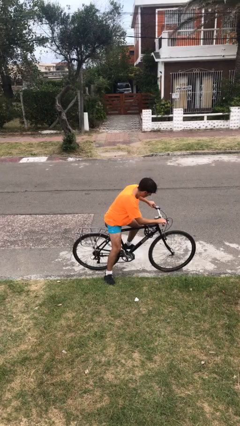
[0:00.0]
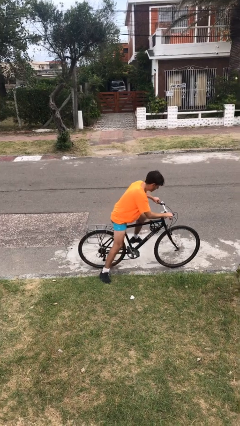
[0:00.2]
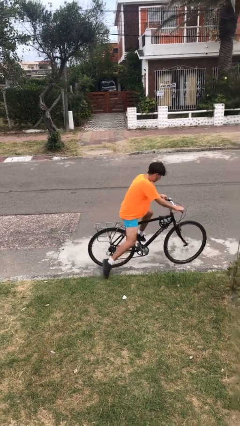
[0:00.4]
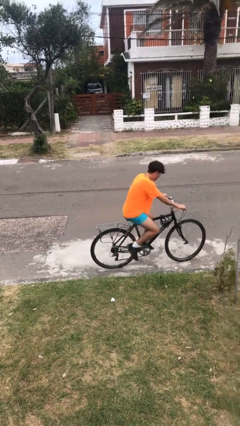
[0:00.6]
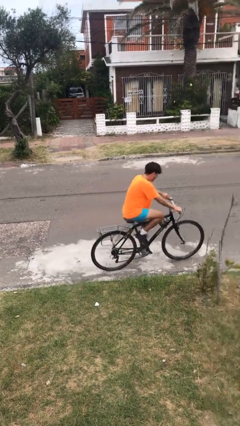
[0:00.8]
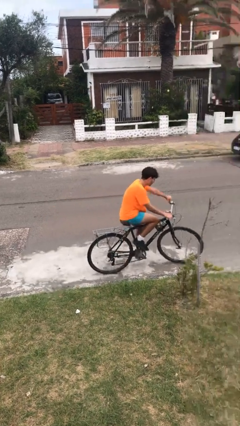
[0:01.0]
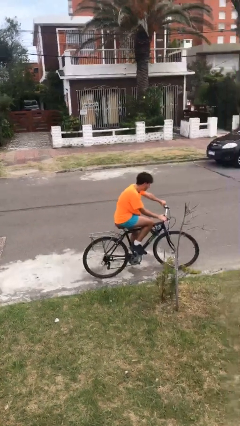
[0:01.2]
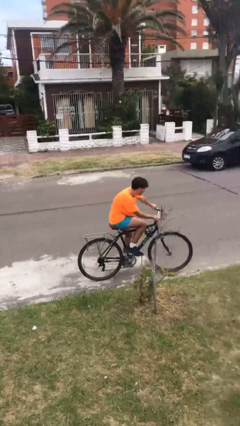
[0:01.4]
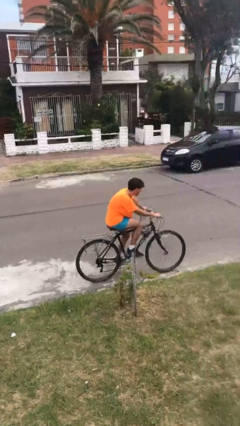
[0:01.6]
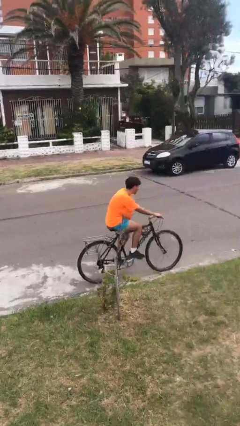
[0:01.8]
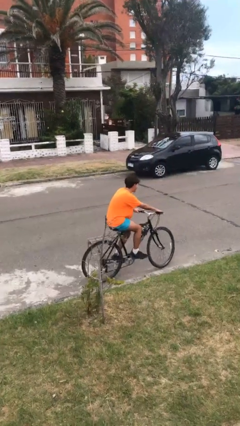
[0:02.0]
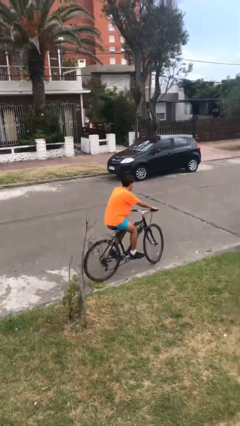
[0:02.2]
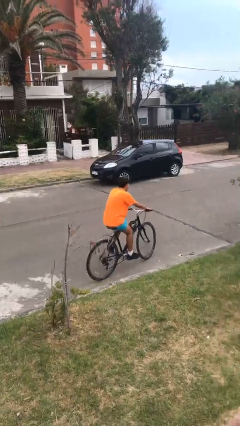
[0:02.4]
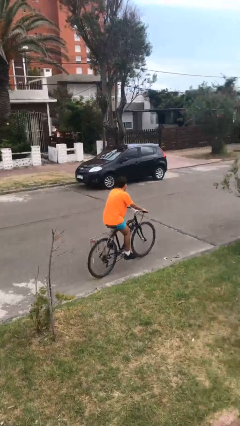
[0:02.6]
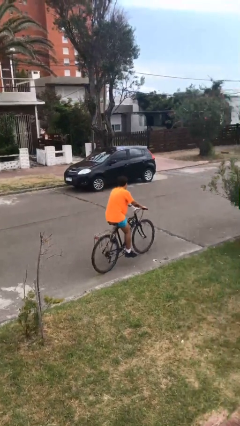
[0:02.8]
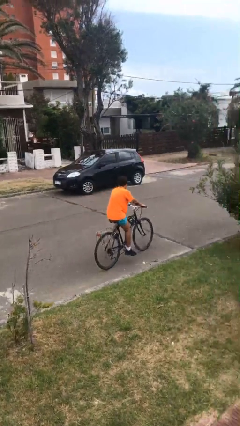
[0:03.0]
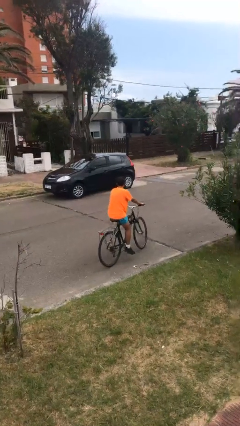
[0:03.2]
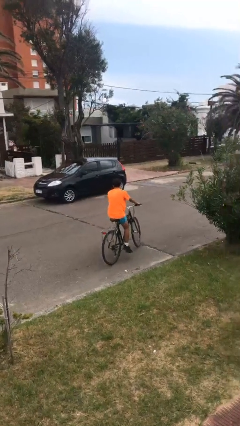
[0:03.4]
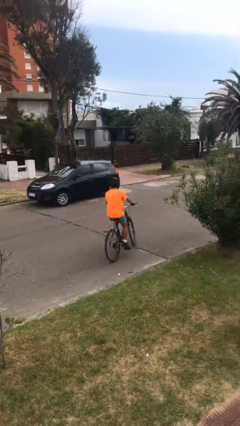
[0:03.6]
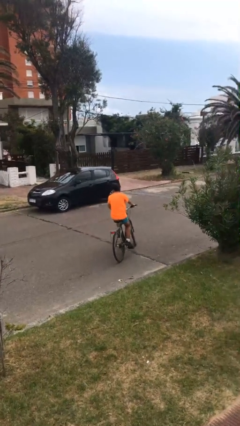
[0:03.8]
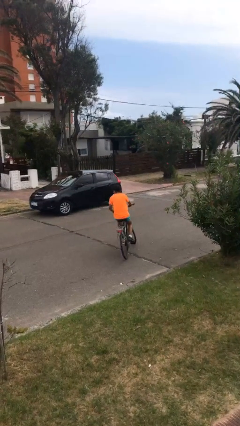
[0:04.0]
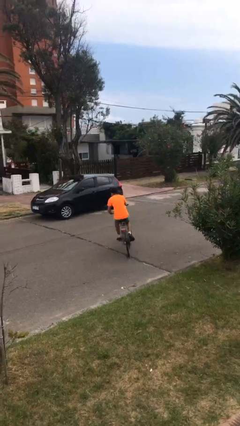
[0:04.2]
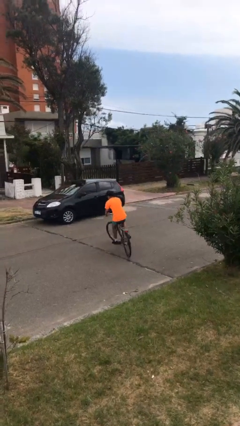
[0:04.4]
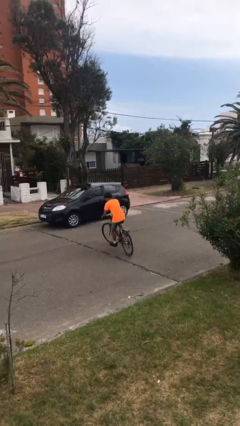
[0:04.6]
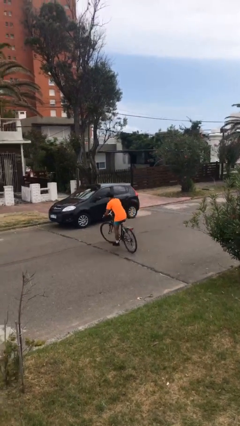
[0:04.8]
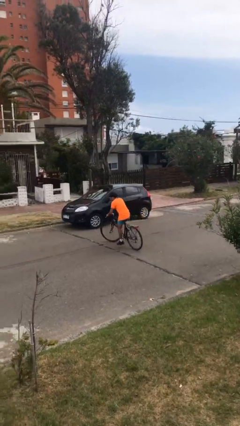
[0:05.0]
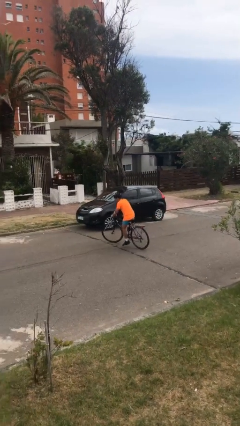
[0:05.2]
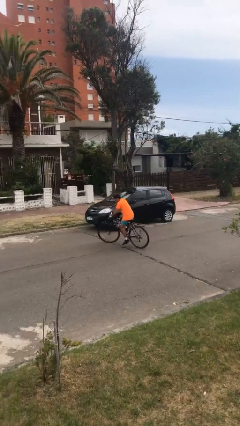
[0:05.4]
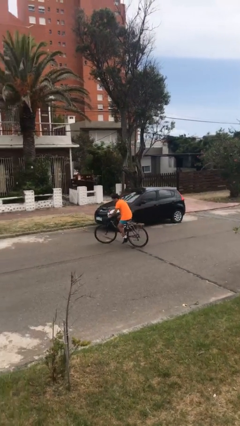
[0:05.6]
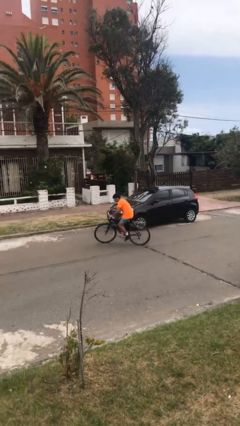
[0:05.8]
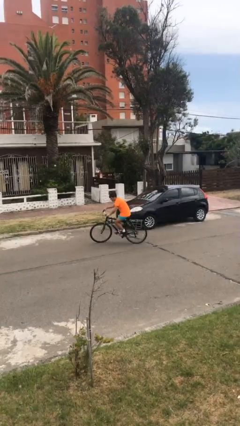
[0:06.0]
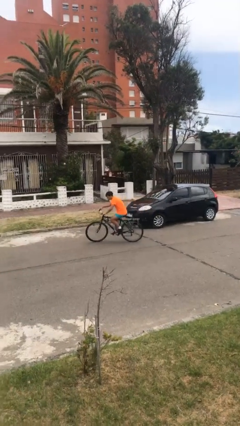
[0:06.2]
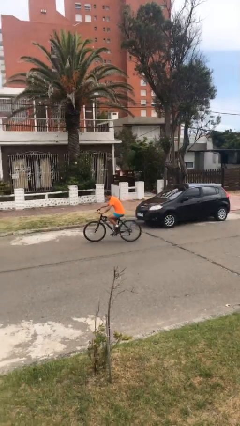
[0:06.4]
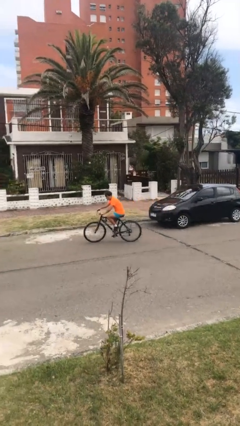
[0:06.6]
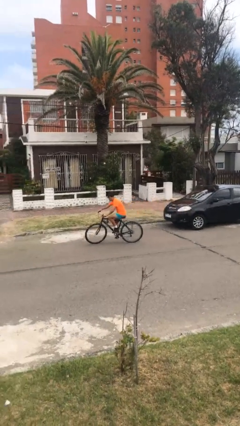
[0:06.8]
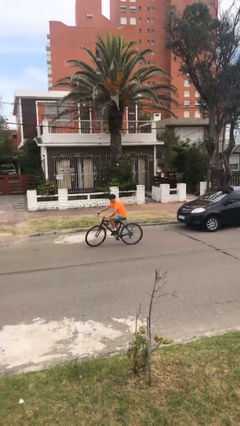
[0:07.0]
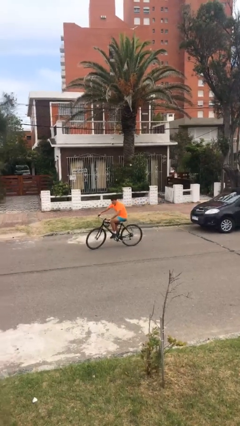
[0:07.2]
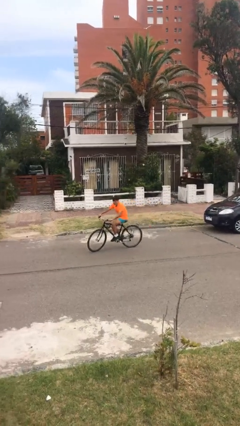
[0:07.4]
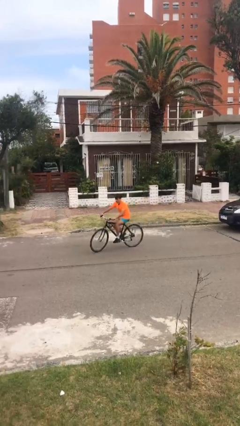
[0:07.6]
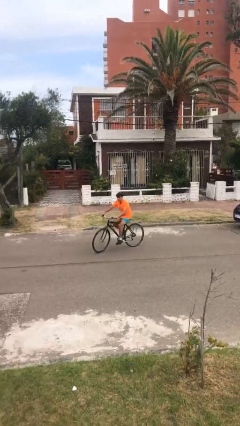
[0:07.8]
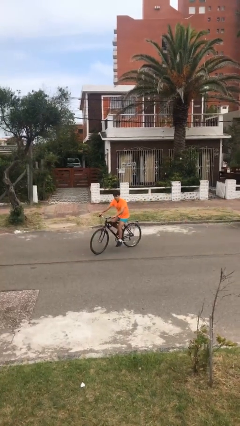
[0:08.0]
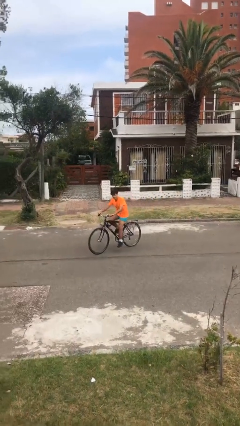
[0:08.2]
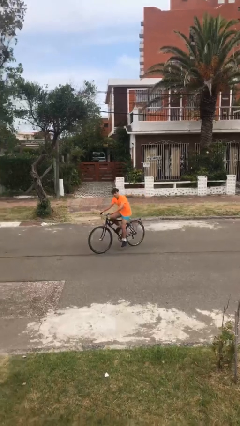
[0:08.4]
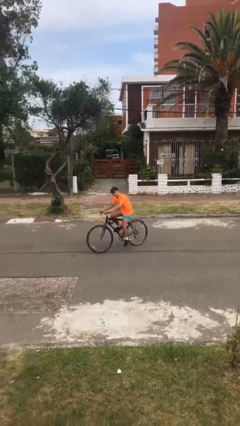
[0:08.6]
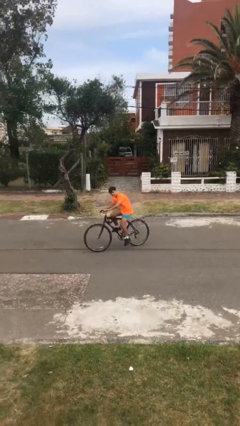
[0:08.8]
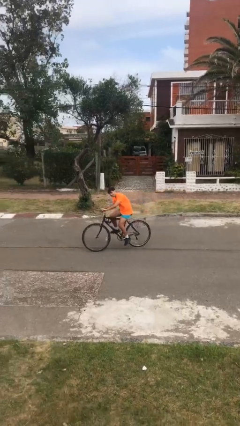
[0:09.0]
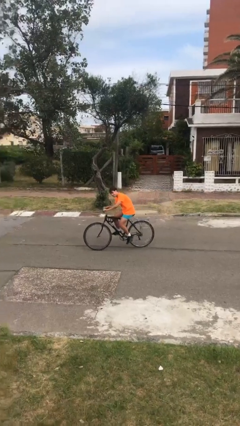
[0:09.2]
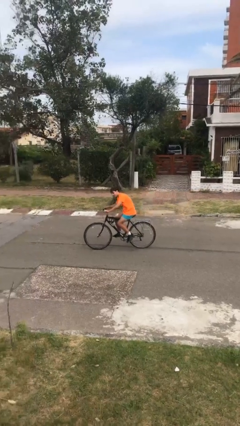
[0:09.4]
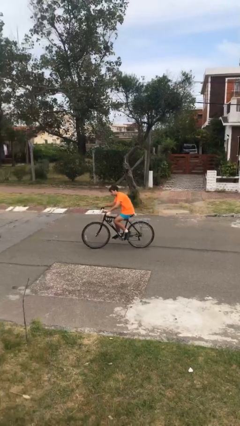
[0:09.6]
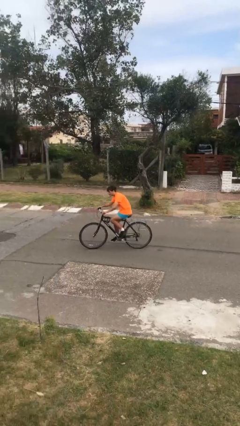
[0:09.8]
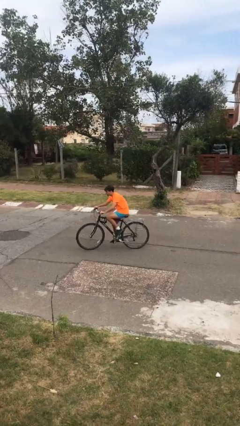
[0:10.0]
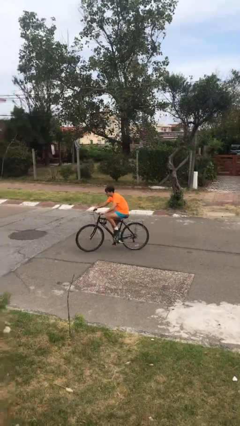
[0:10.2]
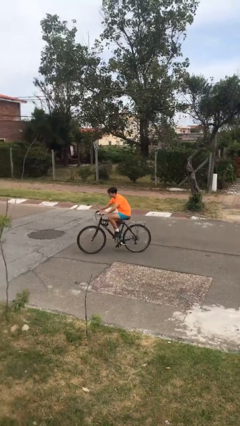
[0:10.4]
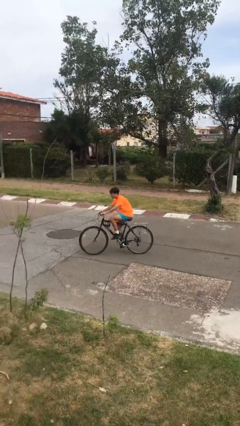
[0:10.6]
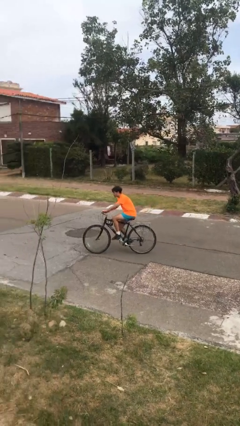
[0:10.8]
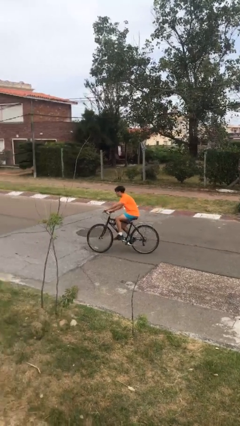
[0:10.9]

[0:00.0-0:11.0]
person rides bicycle

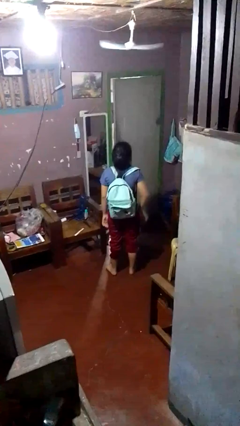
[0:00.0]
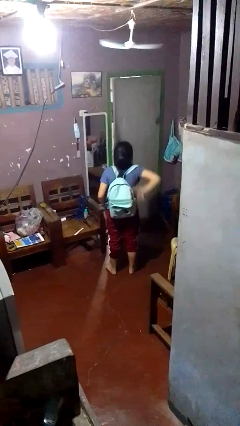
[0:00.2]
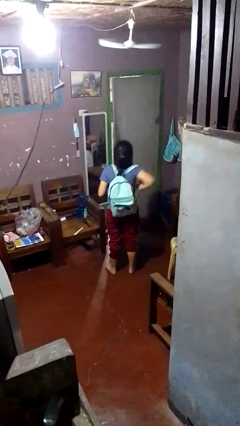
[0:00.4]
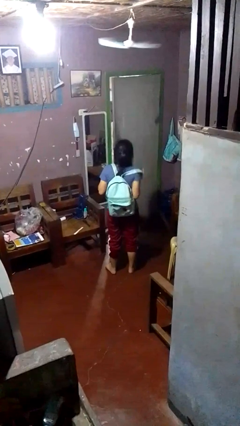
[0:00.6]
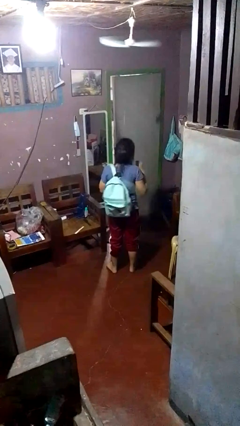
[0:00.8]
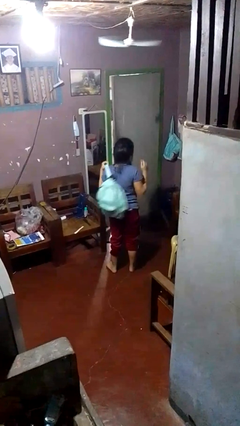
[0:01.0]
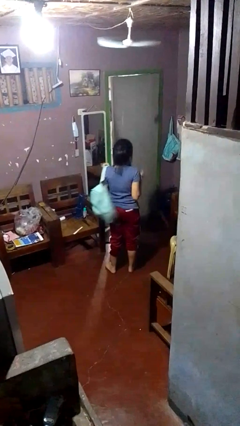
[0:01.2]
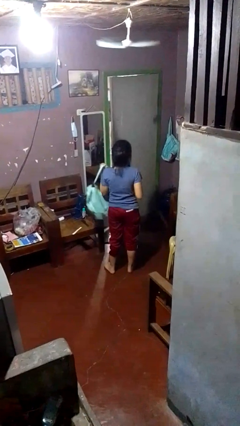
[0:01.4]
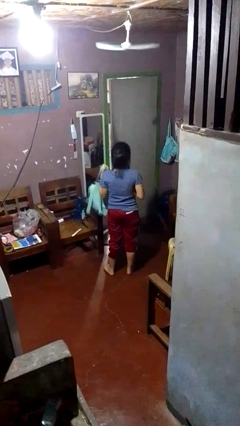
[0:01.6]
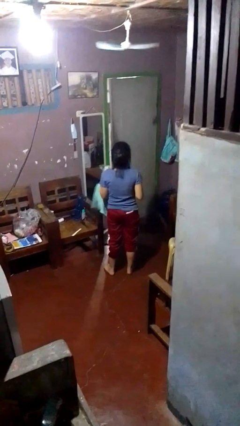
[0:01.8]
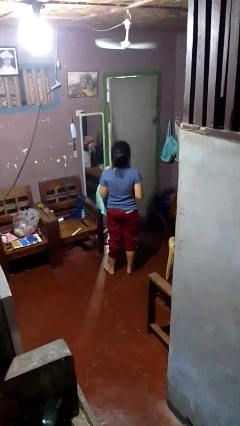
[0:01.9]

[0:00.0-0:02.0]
person takes off backpack

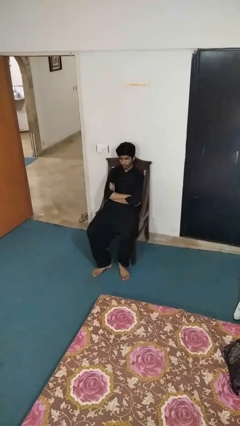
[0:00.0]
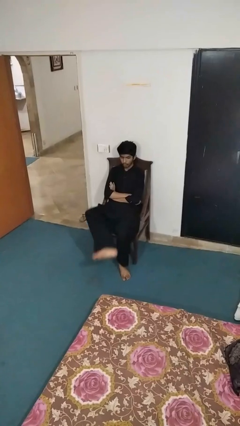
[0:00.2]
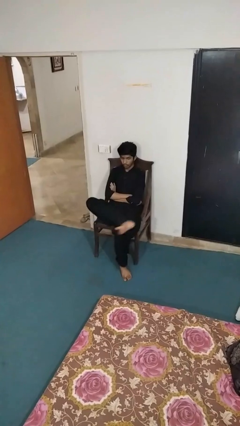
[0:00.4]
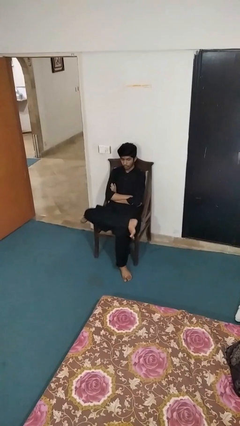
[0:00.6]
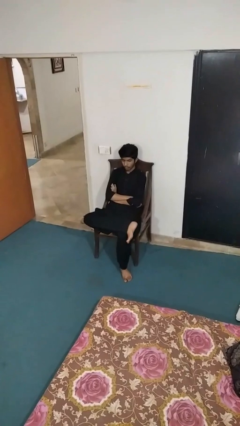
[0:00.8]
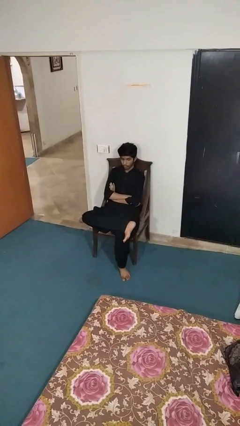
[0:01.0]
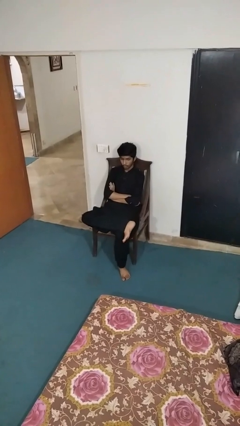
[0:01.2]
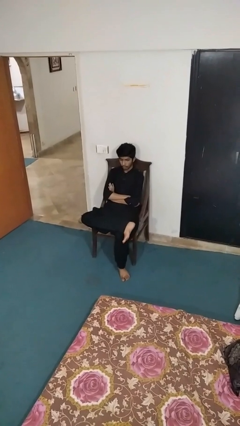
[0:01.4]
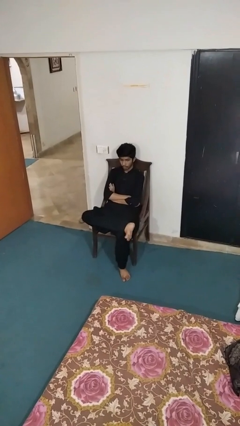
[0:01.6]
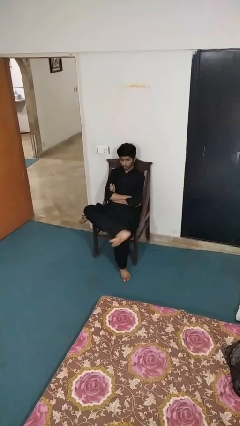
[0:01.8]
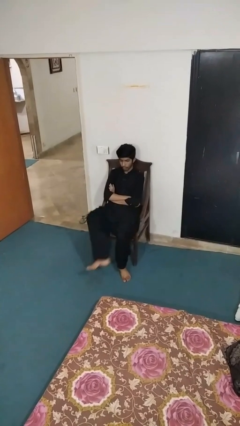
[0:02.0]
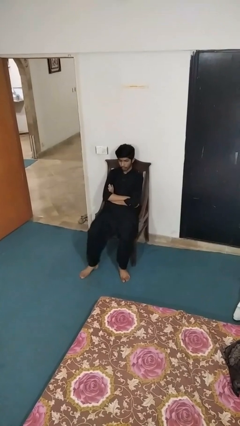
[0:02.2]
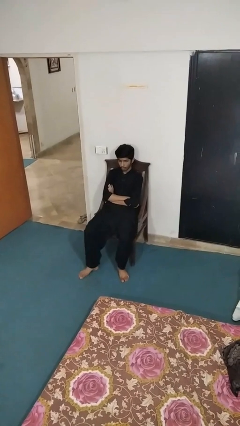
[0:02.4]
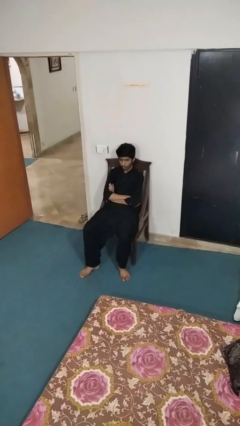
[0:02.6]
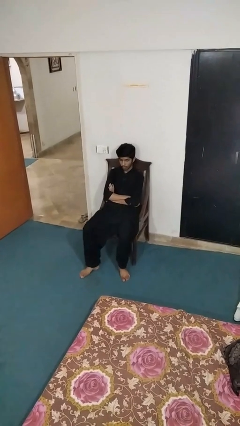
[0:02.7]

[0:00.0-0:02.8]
person crosses legs

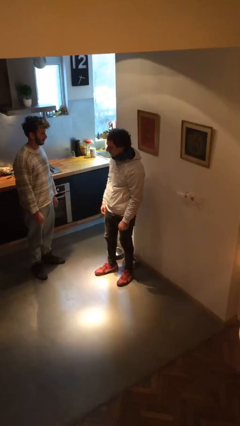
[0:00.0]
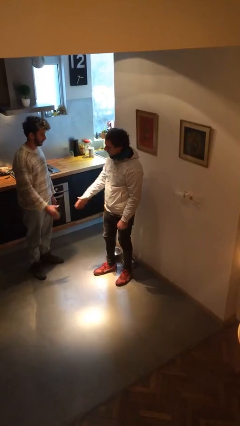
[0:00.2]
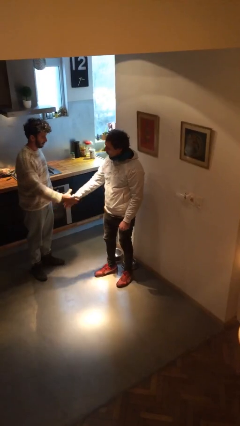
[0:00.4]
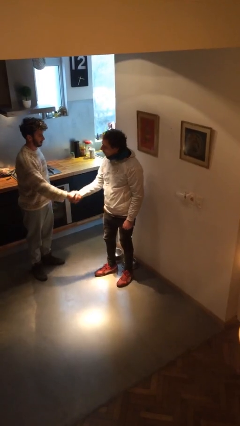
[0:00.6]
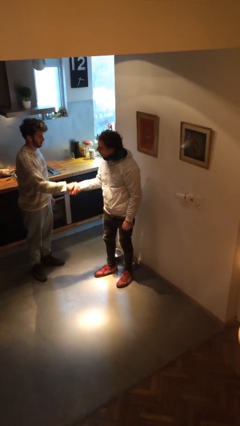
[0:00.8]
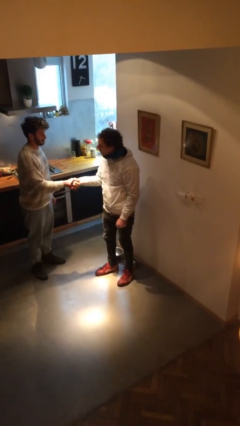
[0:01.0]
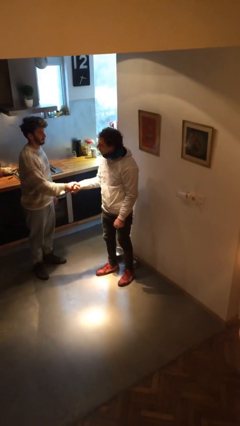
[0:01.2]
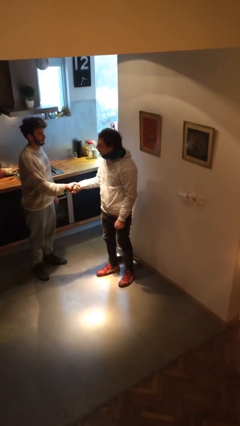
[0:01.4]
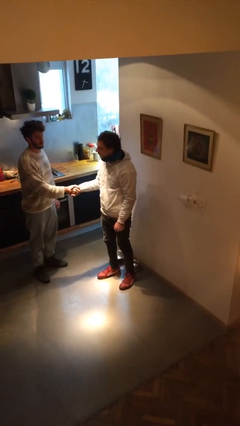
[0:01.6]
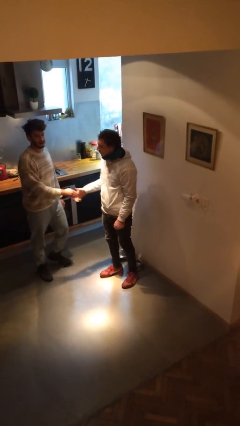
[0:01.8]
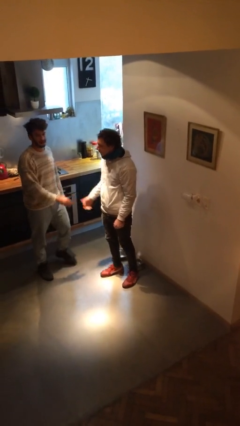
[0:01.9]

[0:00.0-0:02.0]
person shakes hand

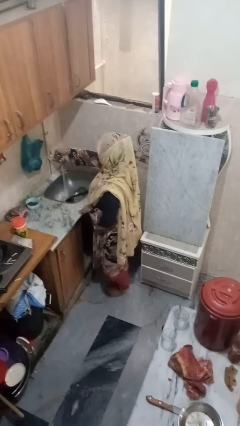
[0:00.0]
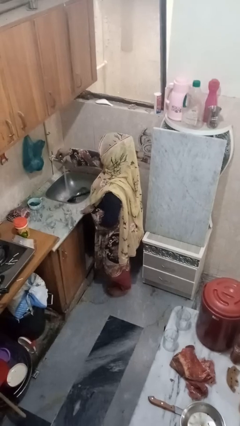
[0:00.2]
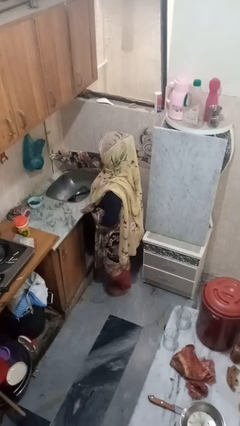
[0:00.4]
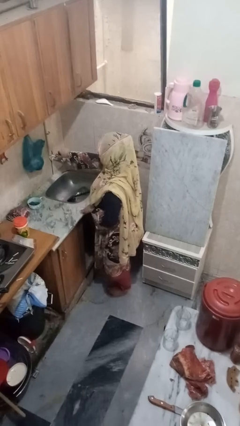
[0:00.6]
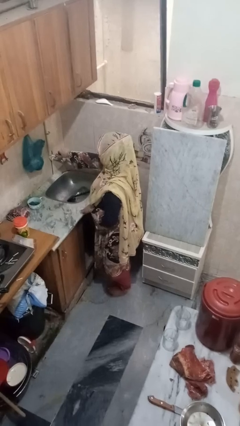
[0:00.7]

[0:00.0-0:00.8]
person turns off faucet
